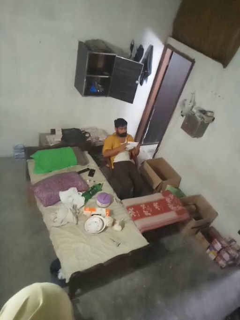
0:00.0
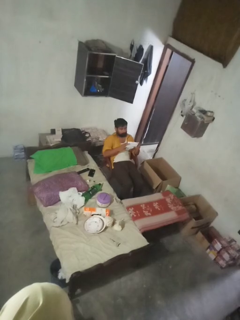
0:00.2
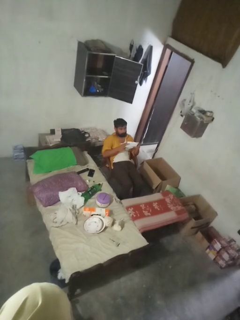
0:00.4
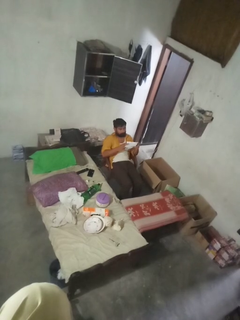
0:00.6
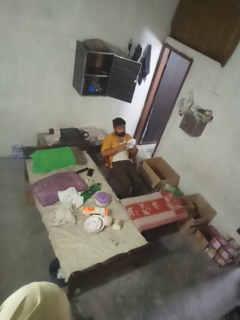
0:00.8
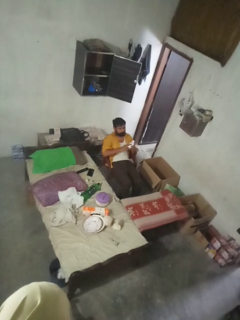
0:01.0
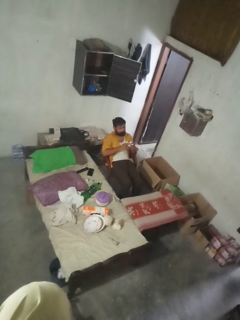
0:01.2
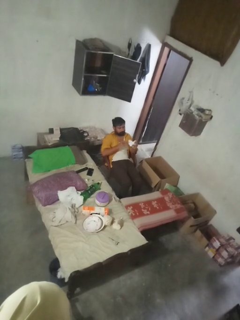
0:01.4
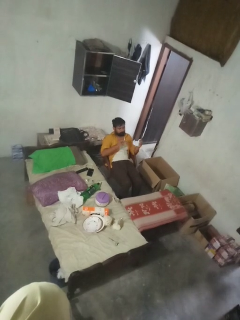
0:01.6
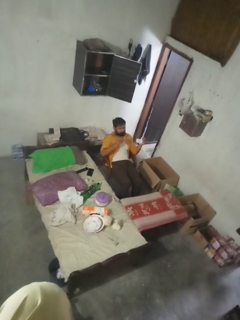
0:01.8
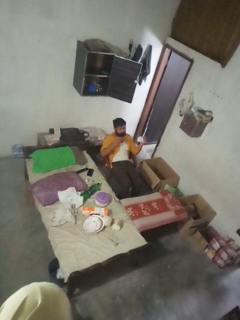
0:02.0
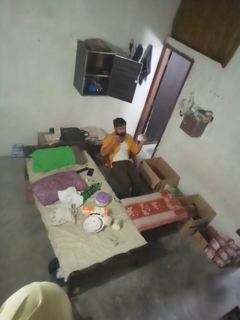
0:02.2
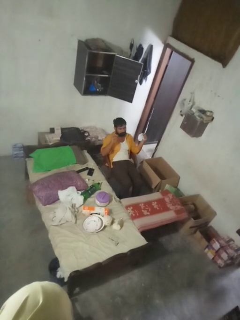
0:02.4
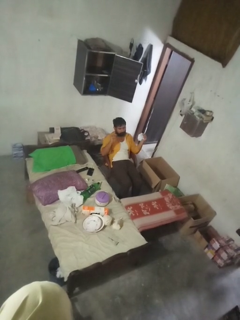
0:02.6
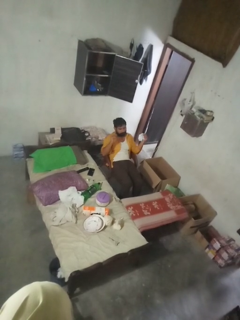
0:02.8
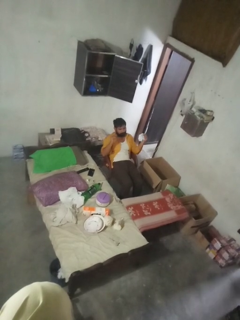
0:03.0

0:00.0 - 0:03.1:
person crumples paper

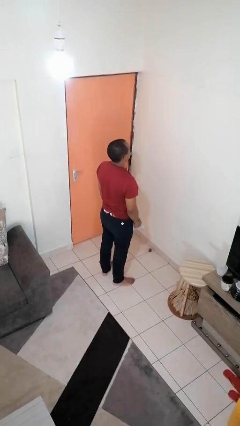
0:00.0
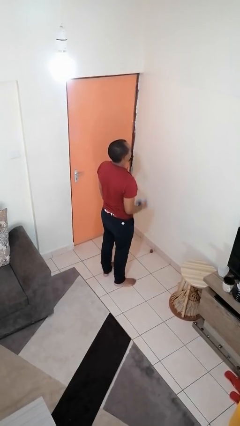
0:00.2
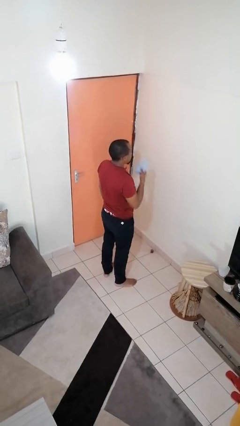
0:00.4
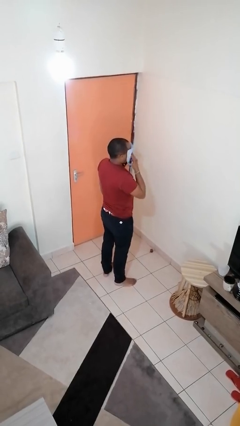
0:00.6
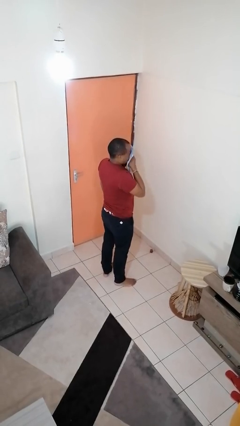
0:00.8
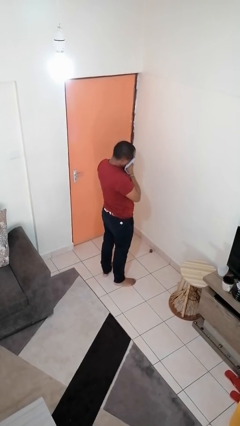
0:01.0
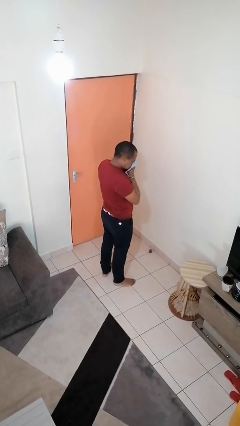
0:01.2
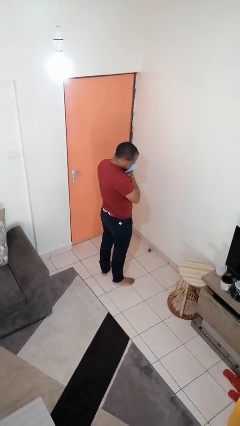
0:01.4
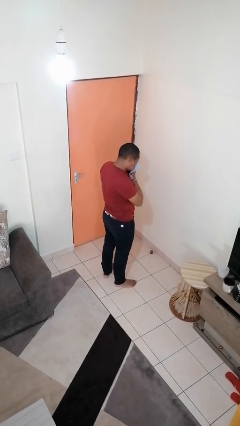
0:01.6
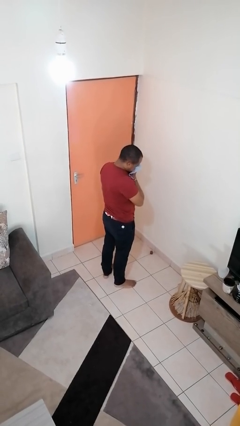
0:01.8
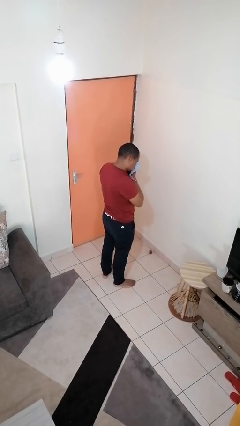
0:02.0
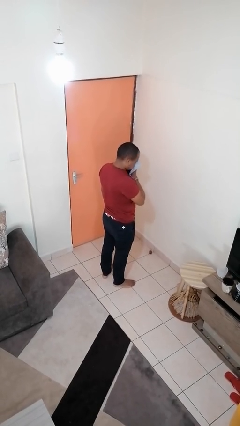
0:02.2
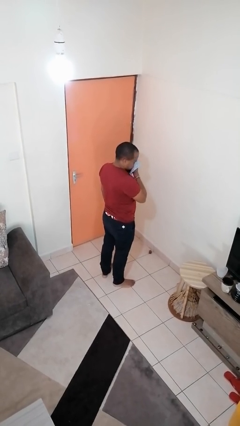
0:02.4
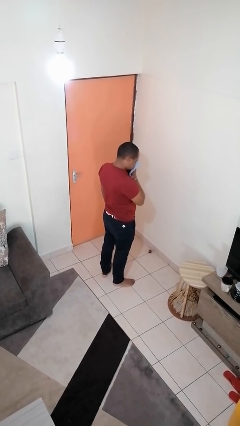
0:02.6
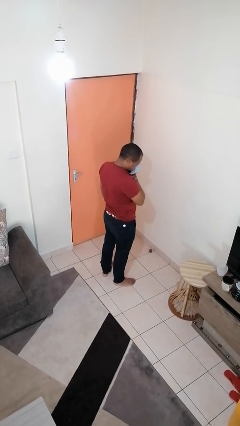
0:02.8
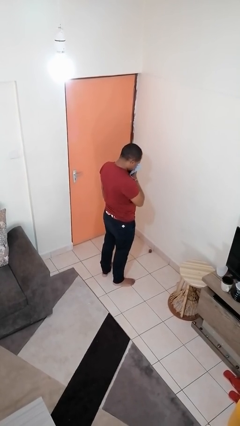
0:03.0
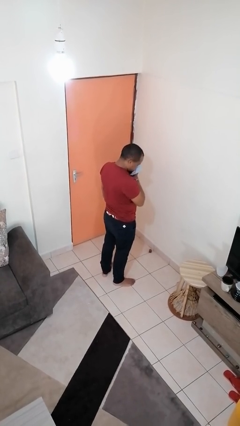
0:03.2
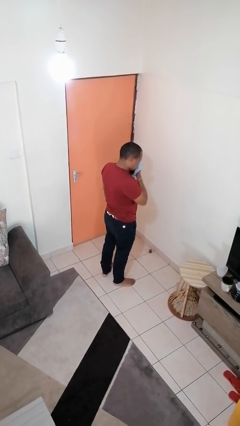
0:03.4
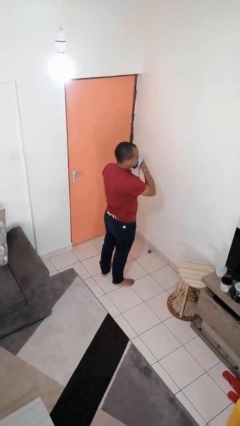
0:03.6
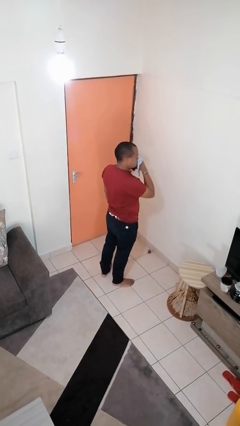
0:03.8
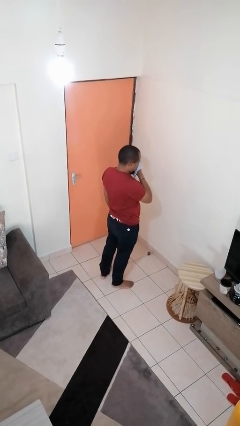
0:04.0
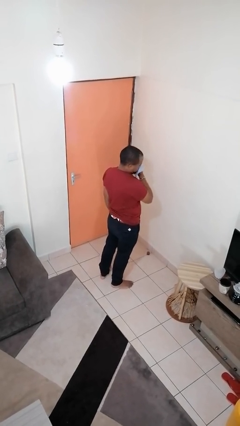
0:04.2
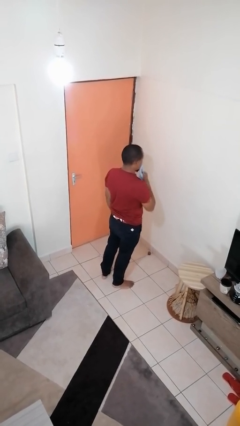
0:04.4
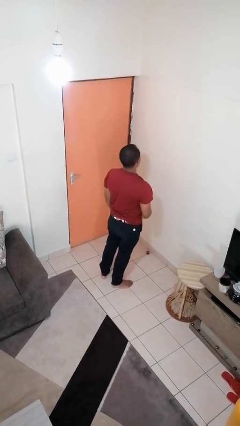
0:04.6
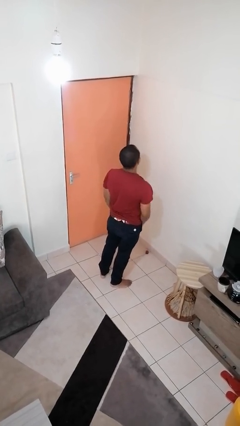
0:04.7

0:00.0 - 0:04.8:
person blows nose

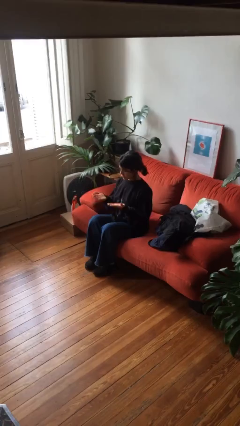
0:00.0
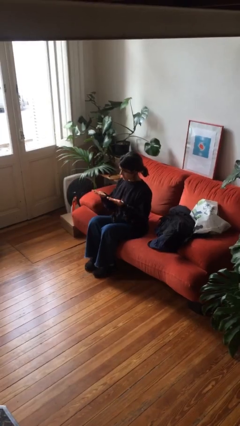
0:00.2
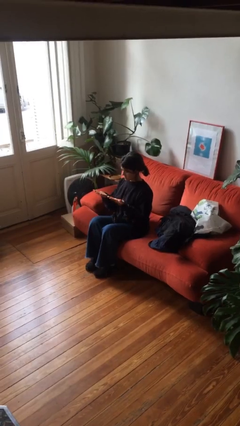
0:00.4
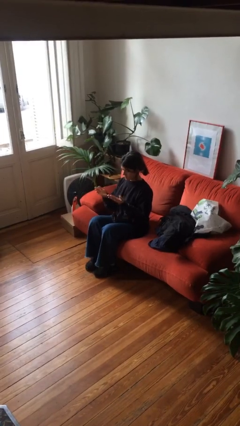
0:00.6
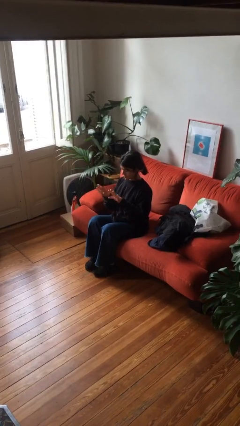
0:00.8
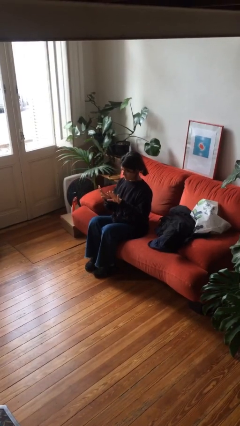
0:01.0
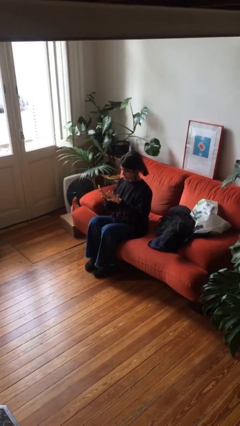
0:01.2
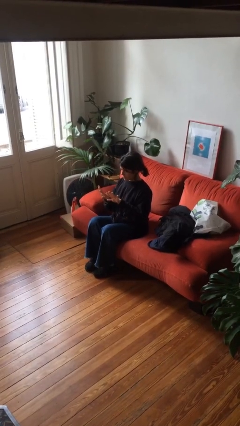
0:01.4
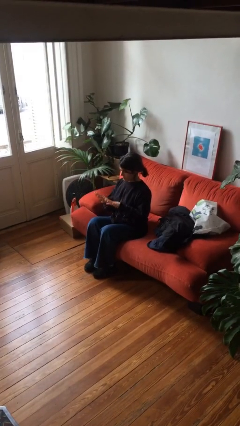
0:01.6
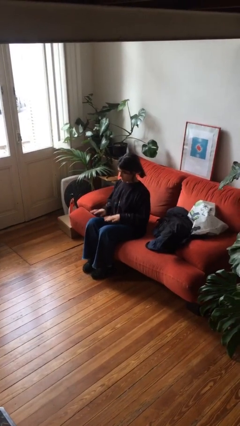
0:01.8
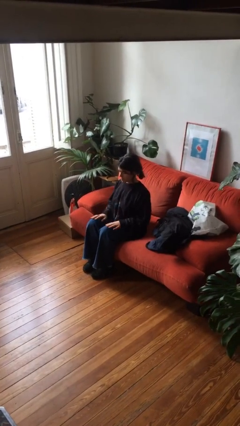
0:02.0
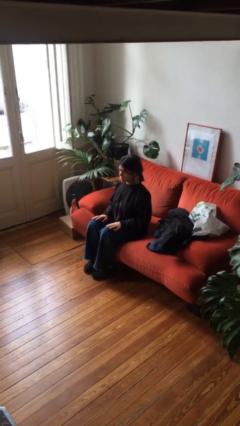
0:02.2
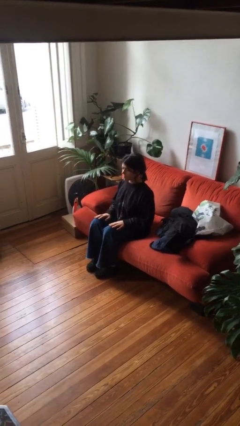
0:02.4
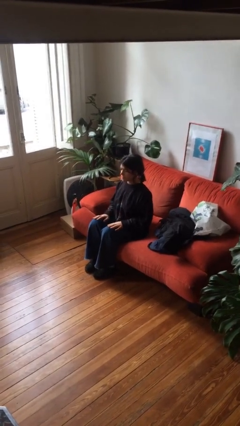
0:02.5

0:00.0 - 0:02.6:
person looks at hands in lap

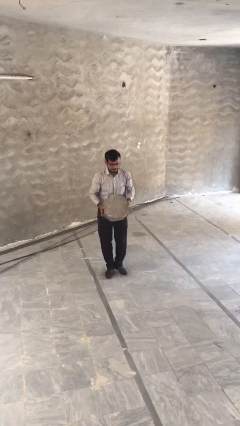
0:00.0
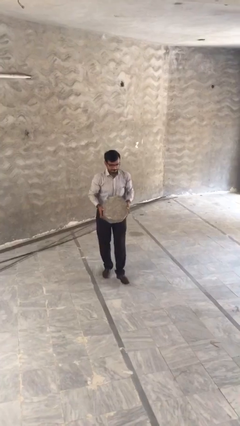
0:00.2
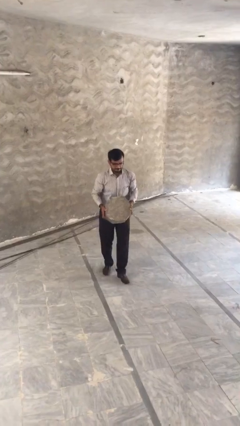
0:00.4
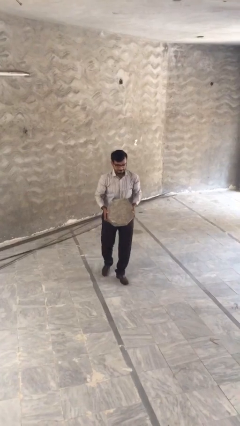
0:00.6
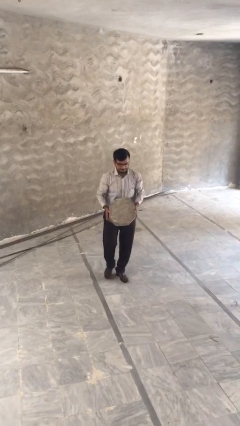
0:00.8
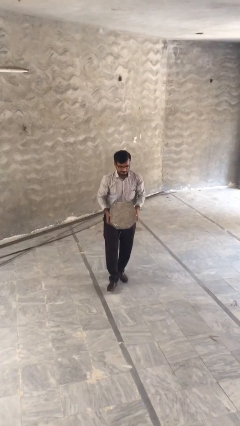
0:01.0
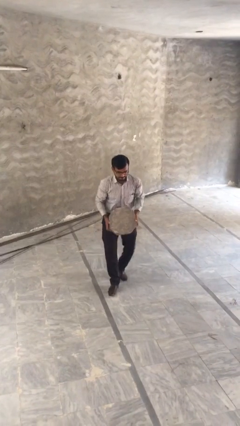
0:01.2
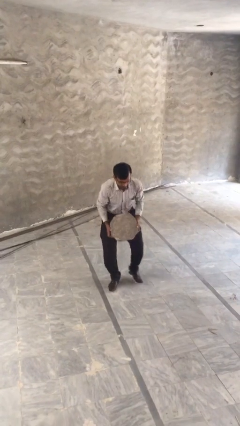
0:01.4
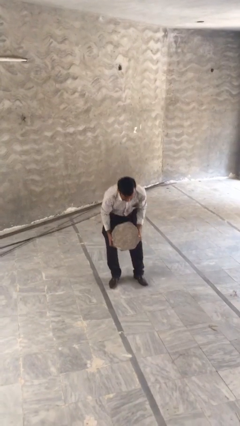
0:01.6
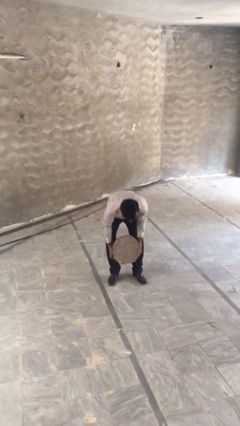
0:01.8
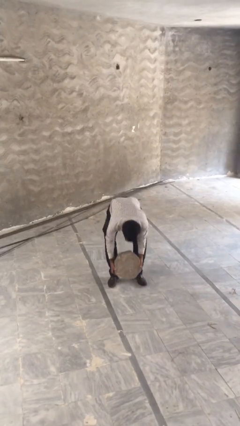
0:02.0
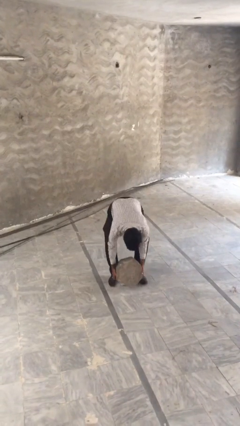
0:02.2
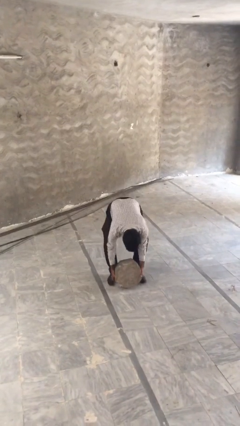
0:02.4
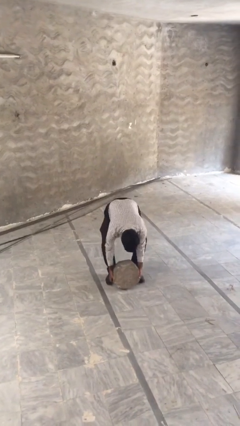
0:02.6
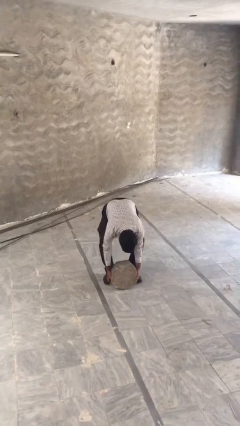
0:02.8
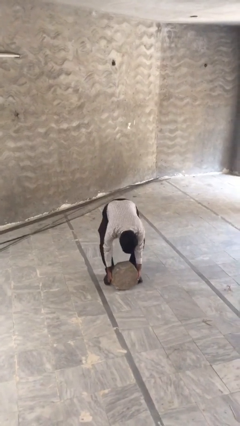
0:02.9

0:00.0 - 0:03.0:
person puts down object on floor

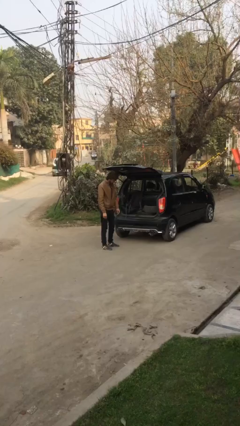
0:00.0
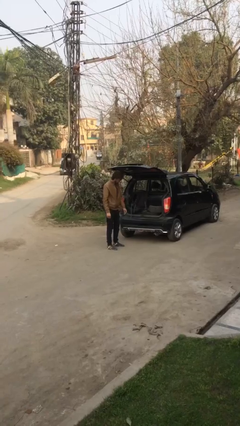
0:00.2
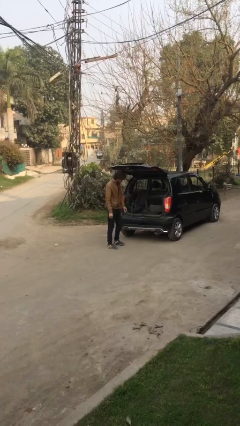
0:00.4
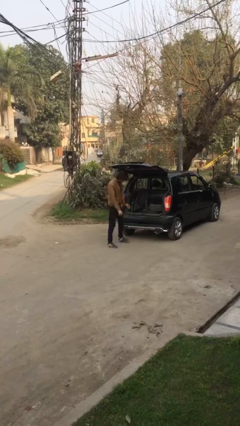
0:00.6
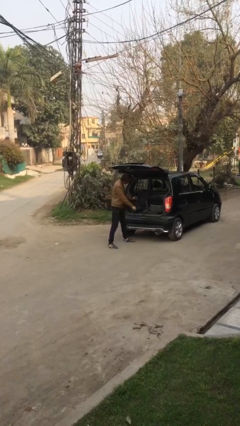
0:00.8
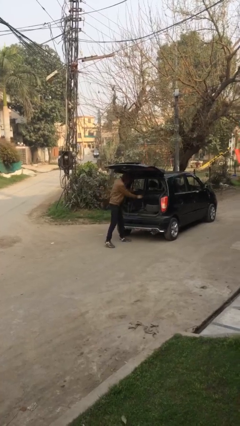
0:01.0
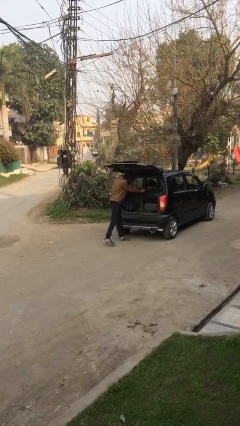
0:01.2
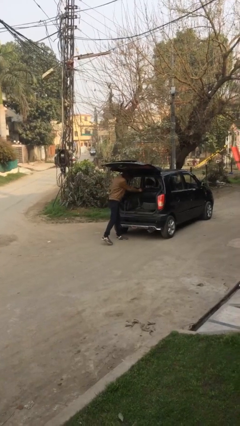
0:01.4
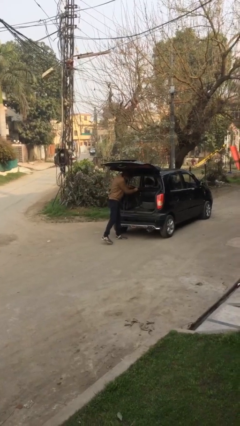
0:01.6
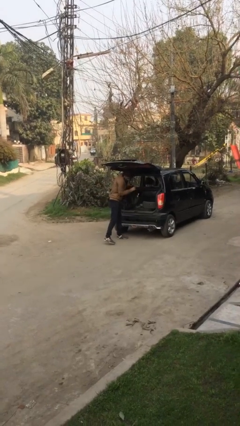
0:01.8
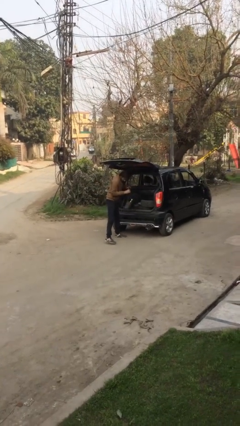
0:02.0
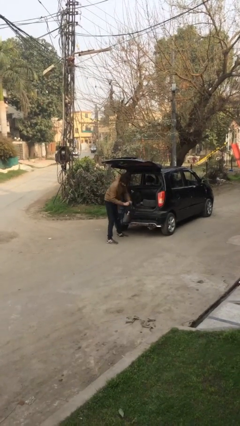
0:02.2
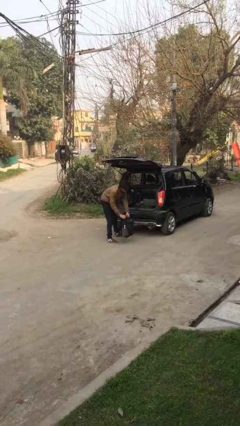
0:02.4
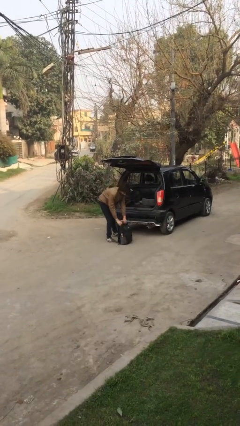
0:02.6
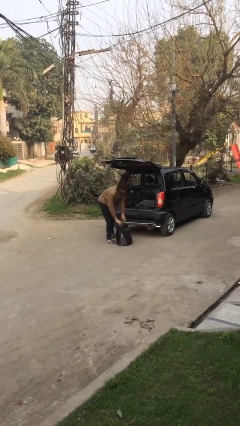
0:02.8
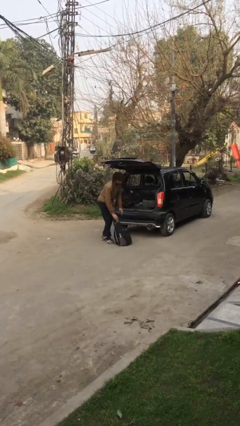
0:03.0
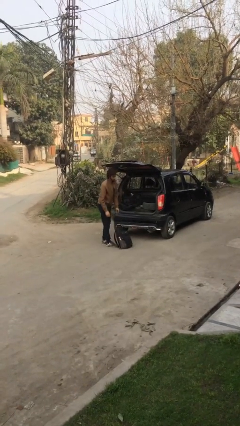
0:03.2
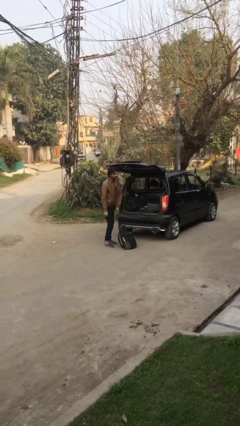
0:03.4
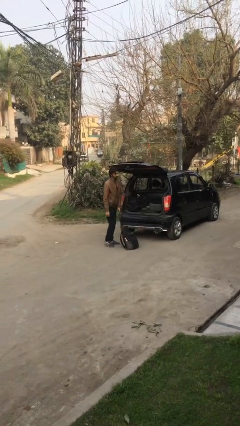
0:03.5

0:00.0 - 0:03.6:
person unloads car

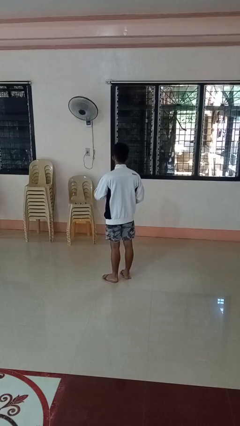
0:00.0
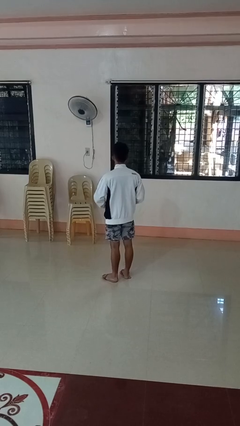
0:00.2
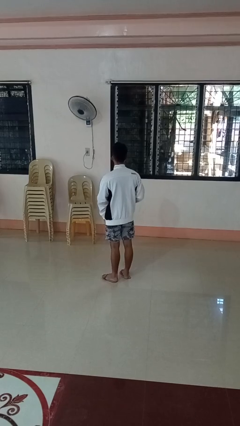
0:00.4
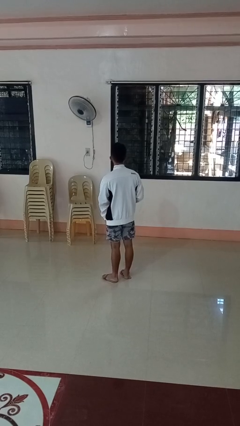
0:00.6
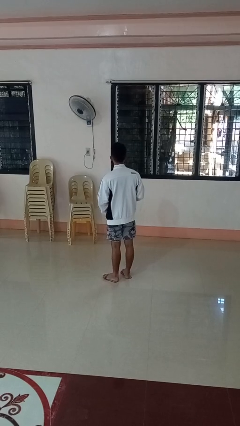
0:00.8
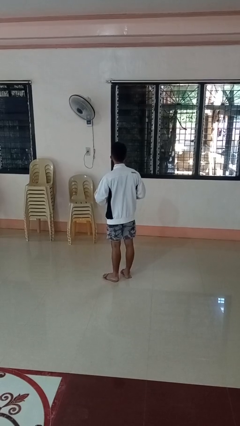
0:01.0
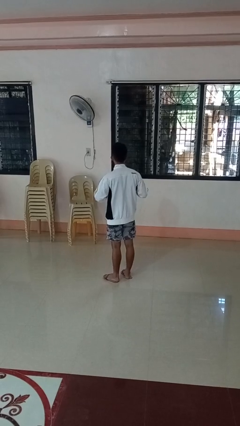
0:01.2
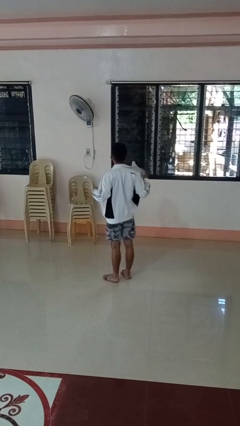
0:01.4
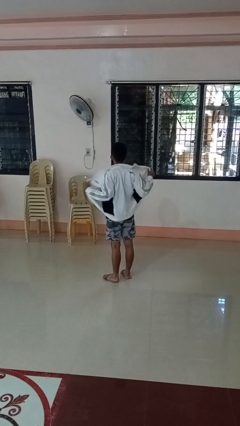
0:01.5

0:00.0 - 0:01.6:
person unzips jacket
